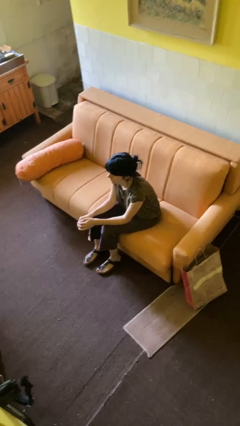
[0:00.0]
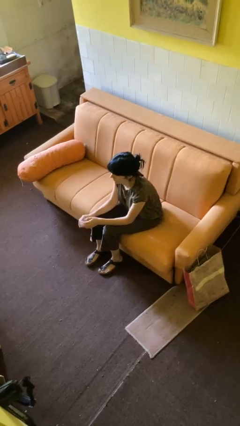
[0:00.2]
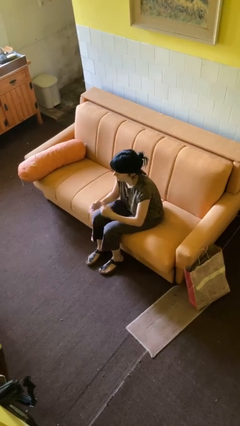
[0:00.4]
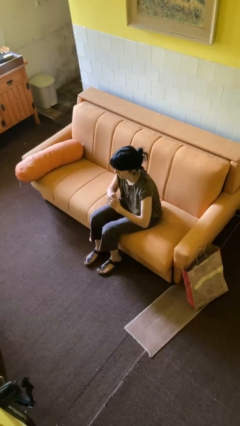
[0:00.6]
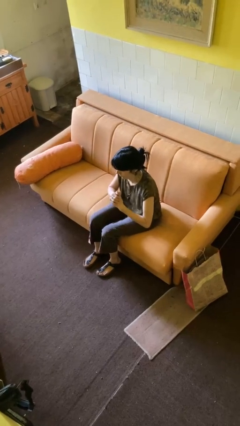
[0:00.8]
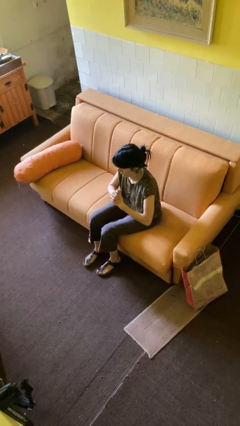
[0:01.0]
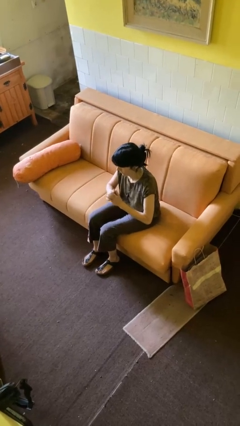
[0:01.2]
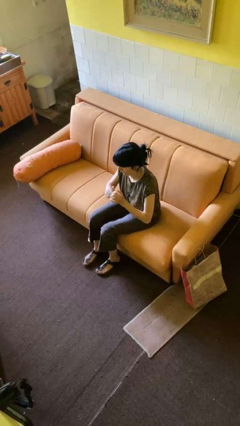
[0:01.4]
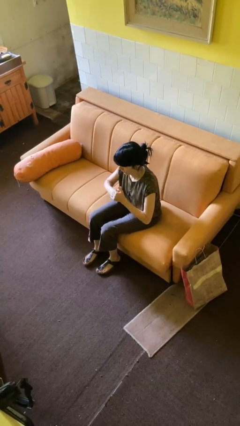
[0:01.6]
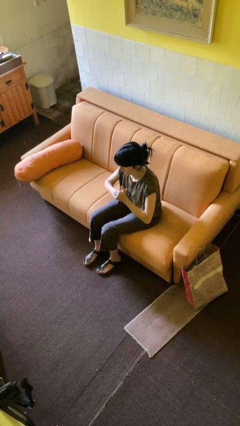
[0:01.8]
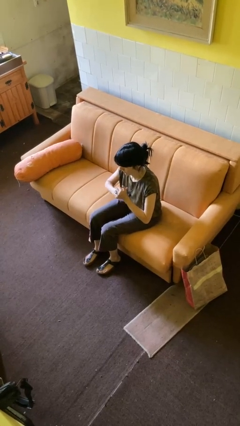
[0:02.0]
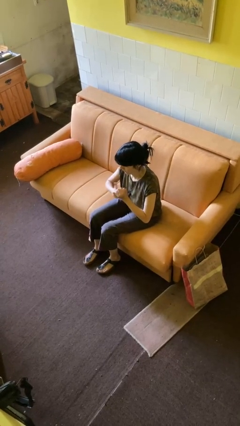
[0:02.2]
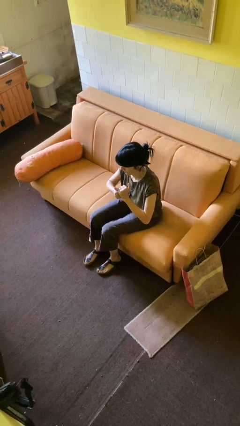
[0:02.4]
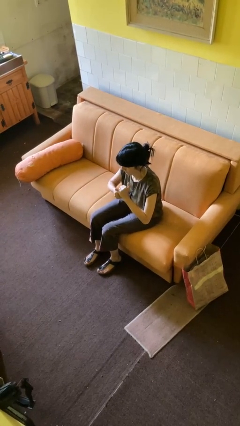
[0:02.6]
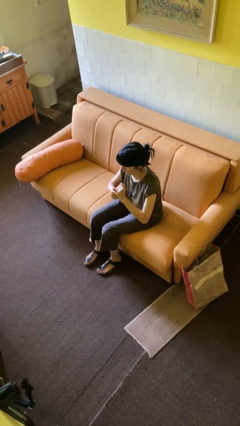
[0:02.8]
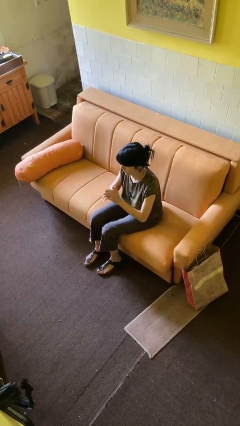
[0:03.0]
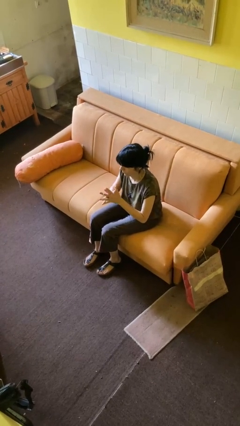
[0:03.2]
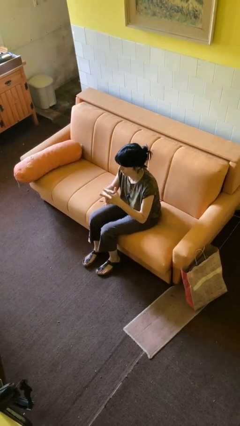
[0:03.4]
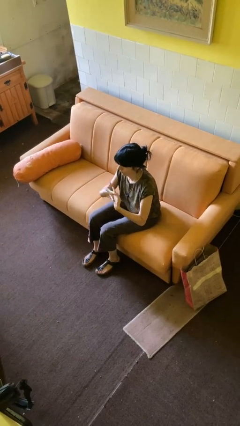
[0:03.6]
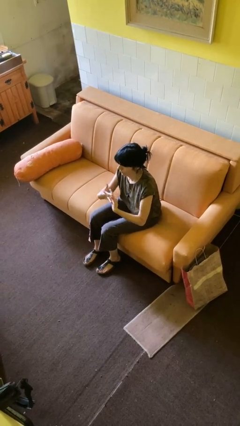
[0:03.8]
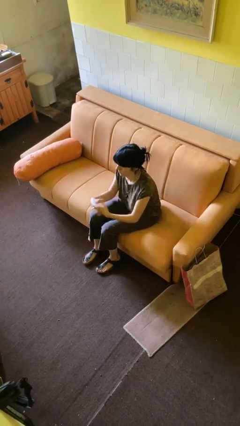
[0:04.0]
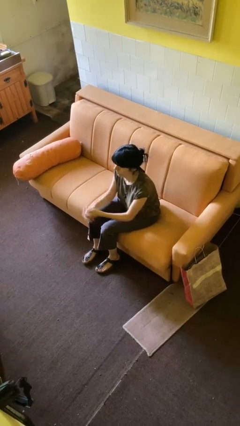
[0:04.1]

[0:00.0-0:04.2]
person cracks knuckles

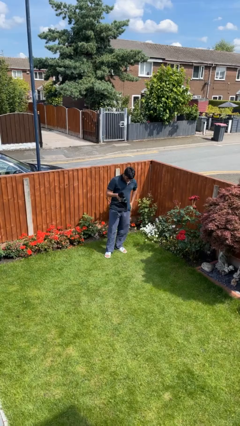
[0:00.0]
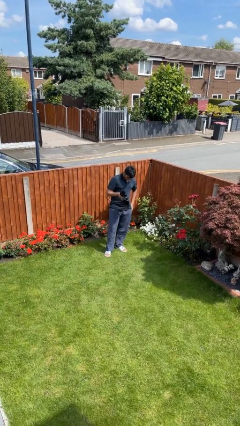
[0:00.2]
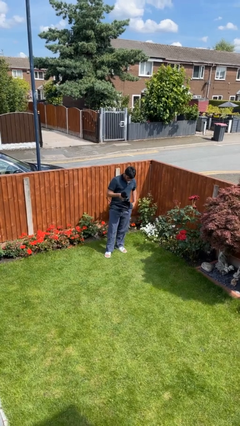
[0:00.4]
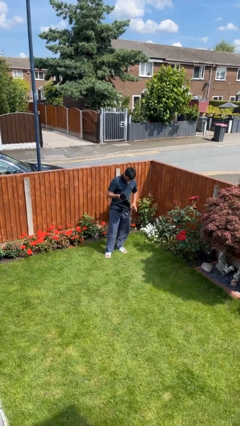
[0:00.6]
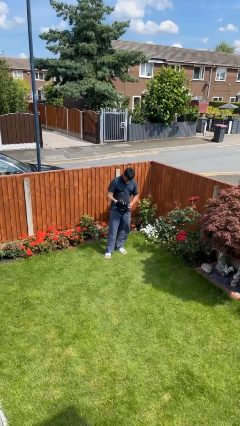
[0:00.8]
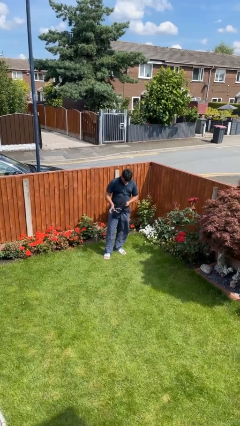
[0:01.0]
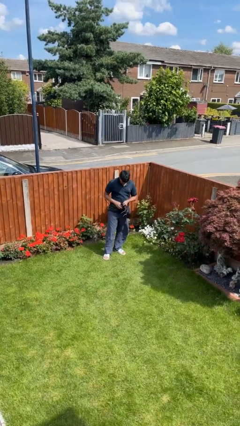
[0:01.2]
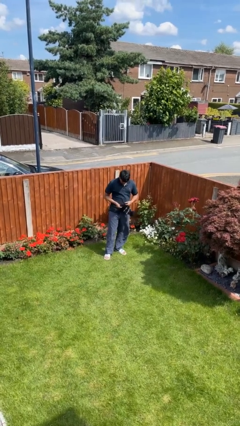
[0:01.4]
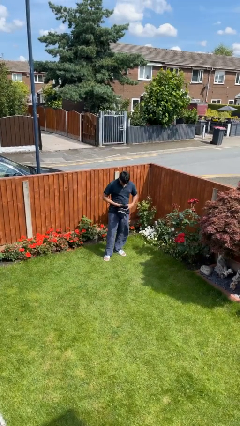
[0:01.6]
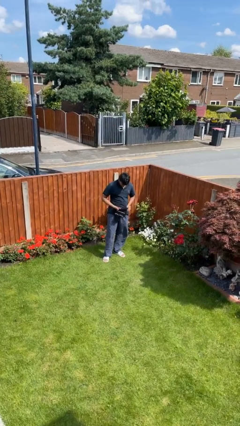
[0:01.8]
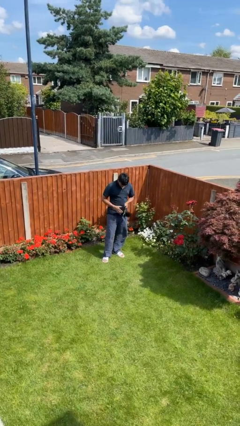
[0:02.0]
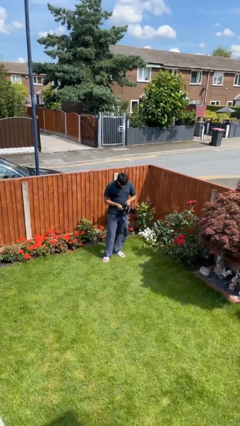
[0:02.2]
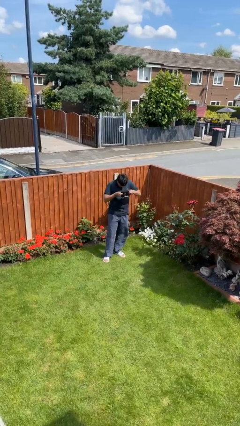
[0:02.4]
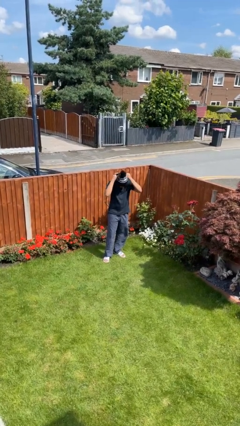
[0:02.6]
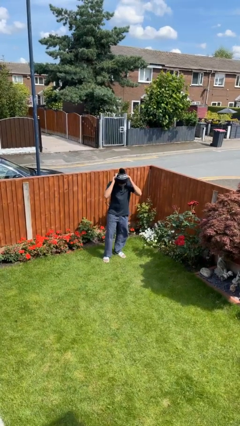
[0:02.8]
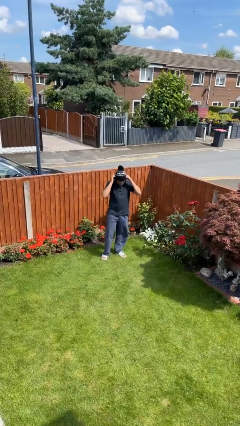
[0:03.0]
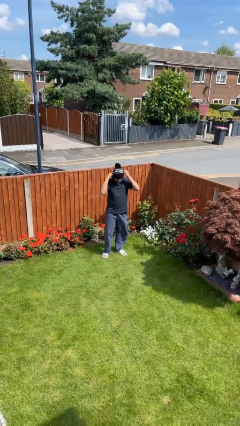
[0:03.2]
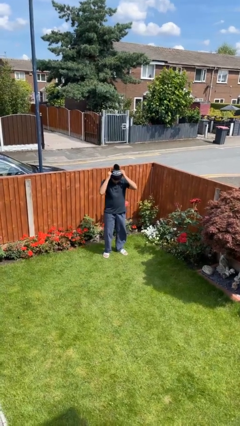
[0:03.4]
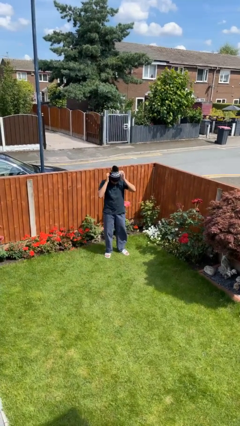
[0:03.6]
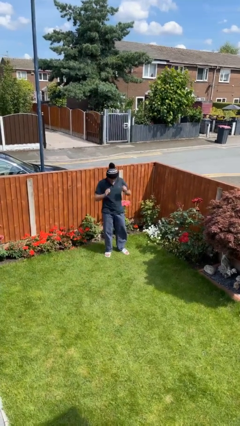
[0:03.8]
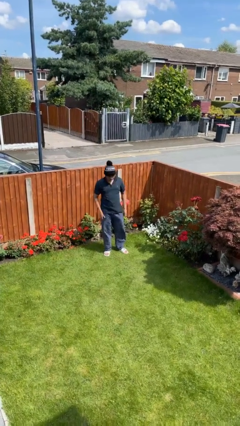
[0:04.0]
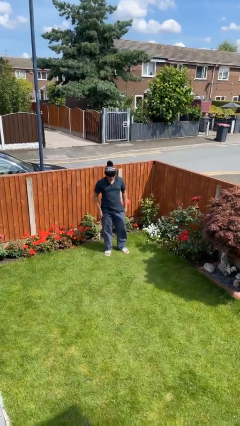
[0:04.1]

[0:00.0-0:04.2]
person puts on hat

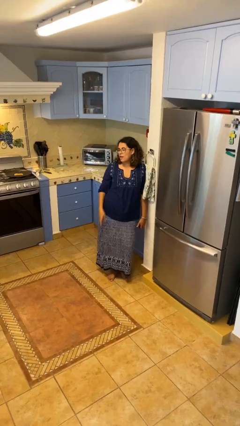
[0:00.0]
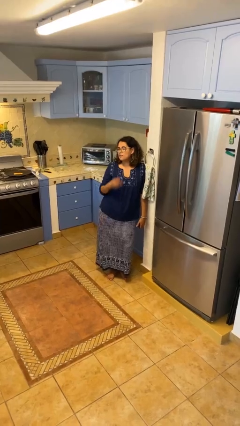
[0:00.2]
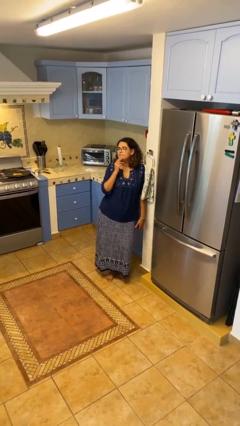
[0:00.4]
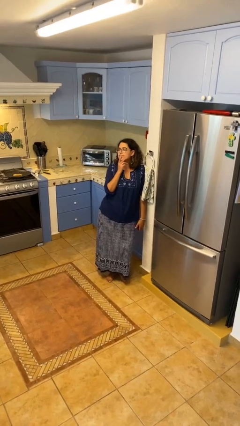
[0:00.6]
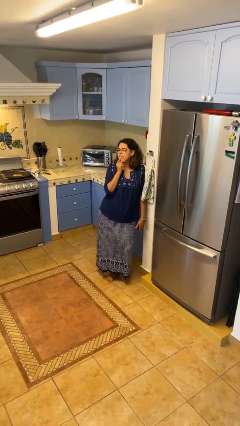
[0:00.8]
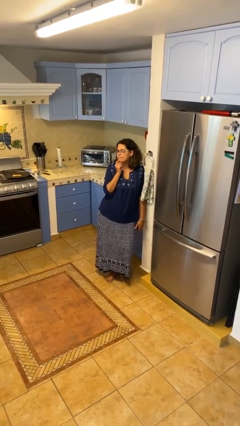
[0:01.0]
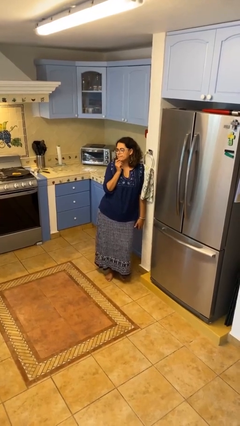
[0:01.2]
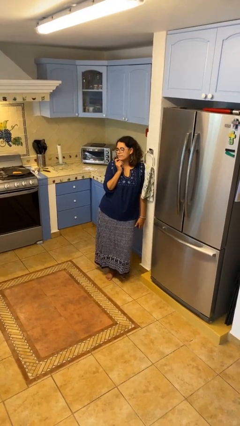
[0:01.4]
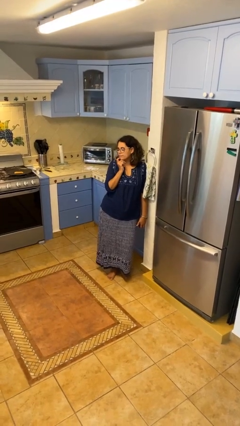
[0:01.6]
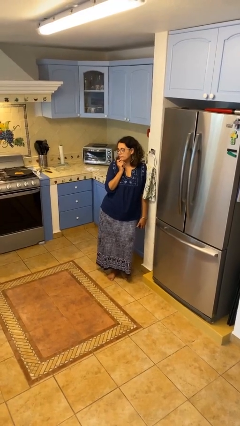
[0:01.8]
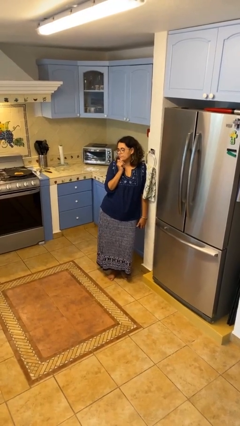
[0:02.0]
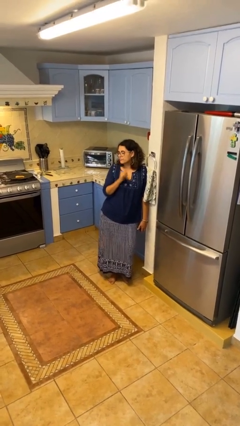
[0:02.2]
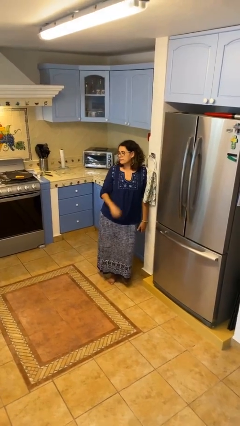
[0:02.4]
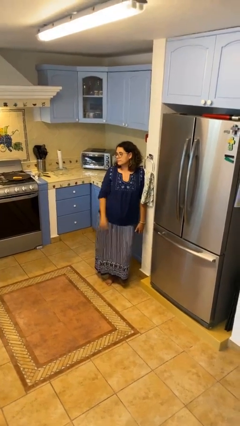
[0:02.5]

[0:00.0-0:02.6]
person strokes chin

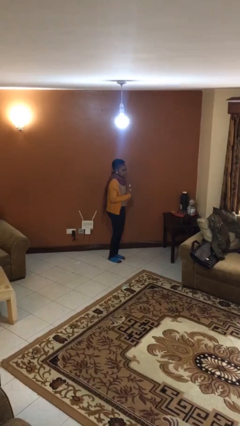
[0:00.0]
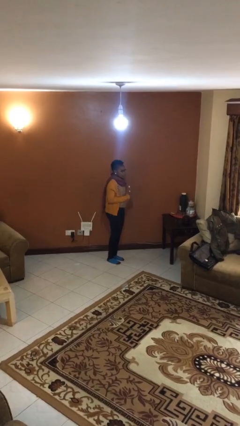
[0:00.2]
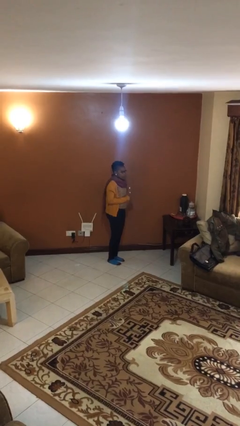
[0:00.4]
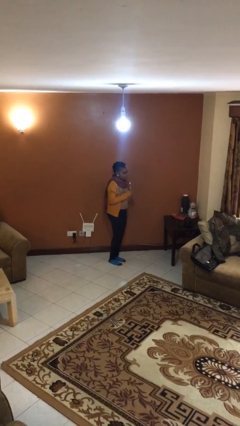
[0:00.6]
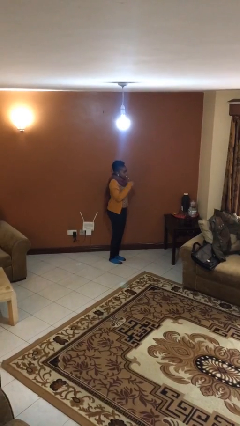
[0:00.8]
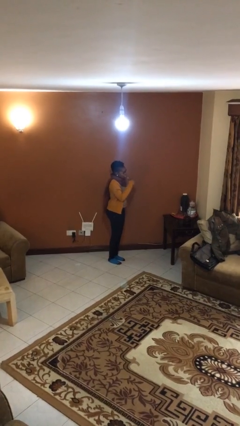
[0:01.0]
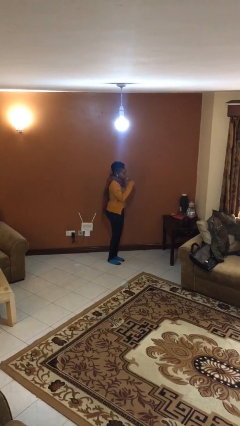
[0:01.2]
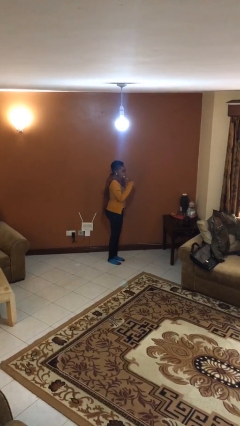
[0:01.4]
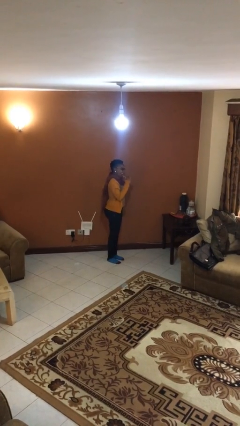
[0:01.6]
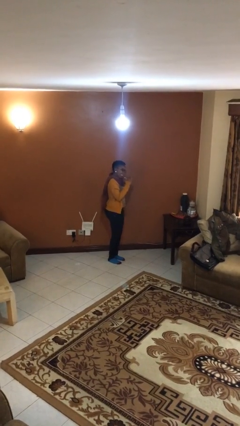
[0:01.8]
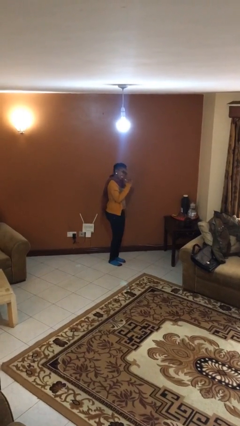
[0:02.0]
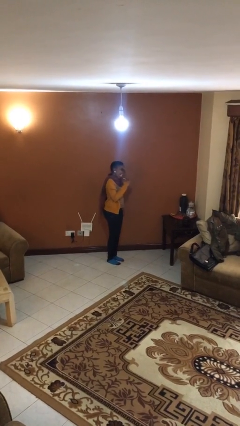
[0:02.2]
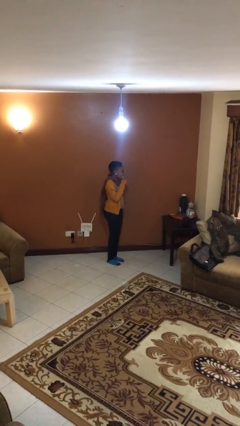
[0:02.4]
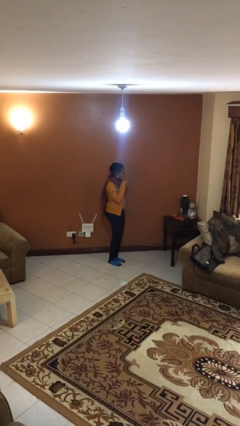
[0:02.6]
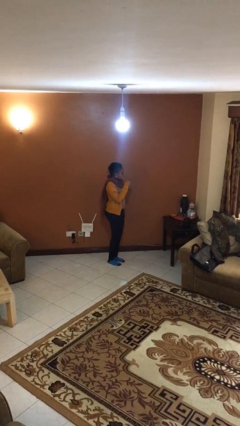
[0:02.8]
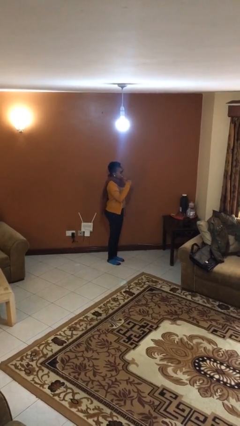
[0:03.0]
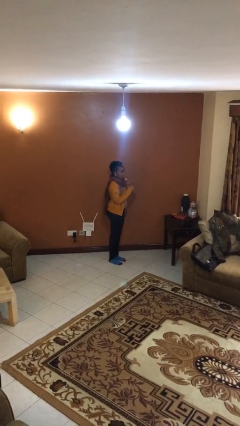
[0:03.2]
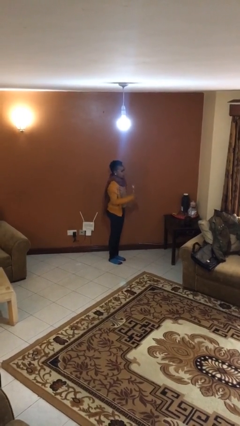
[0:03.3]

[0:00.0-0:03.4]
person brushes teeth

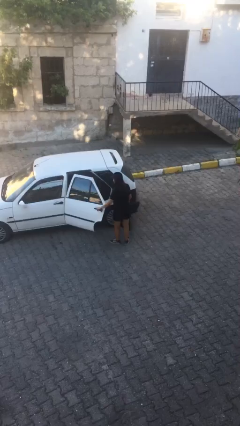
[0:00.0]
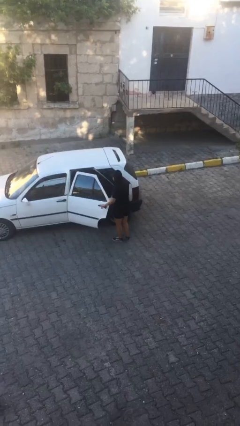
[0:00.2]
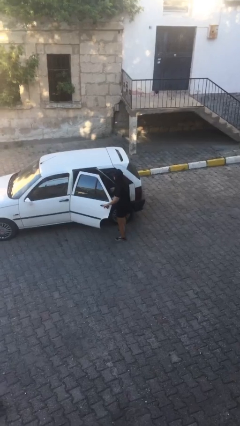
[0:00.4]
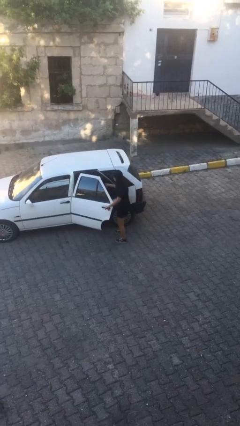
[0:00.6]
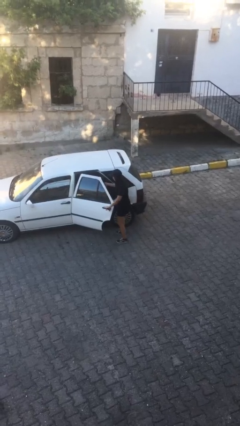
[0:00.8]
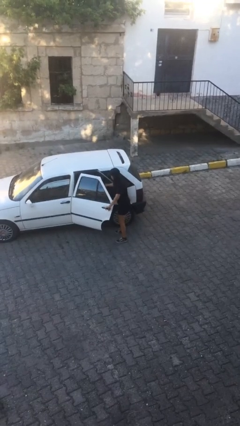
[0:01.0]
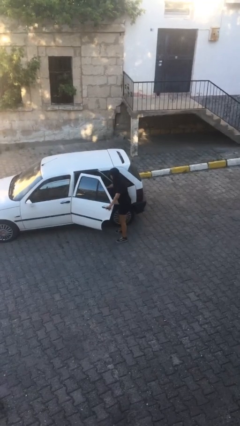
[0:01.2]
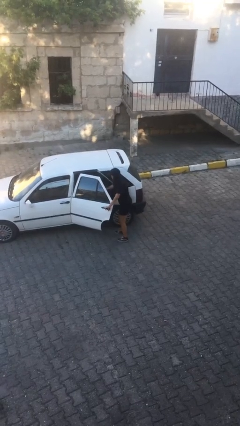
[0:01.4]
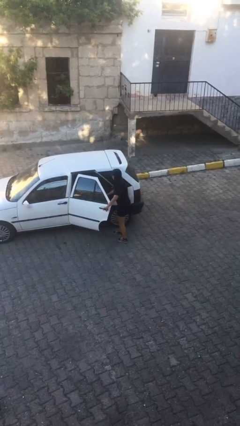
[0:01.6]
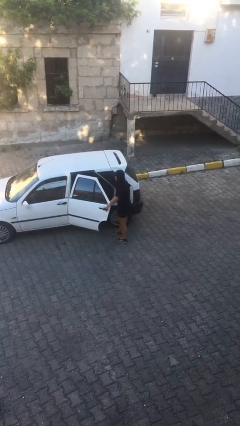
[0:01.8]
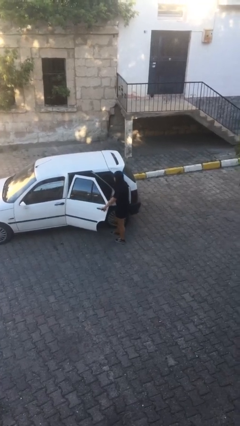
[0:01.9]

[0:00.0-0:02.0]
person loads car

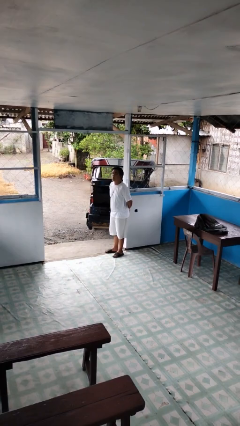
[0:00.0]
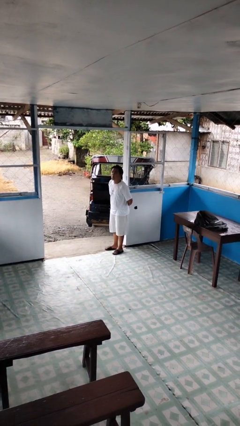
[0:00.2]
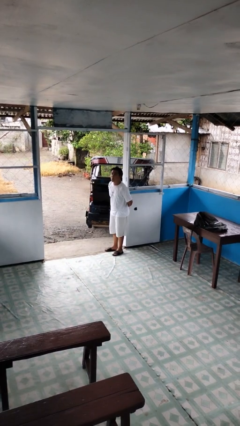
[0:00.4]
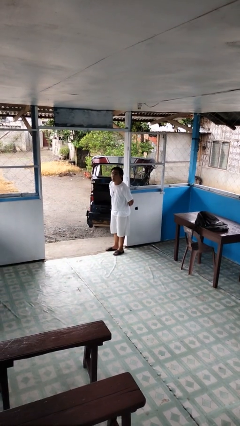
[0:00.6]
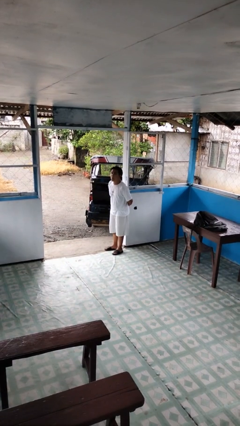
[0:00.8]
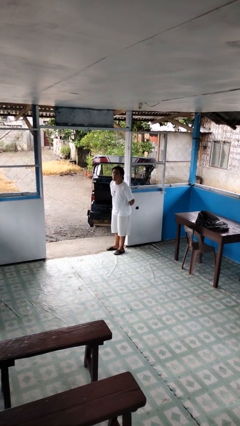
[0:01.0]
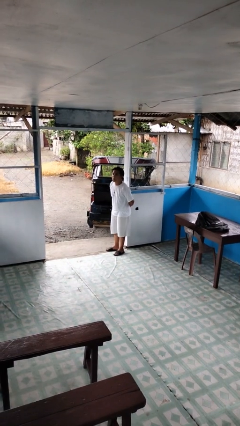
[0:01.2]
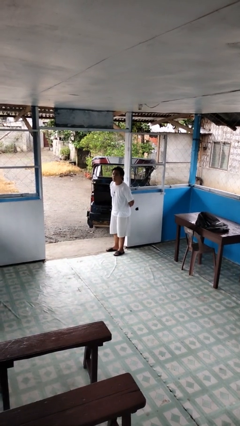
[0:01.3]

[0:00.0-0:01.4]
person sticks out tongue
